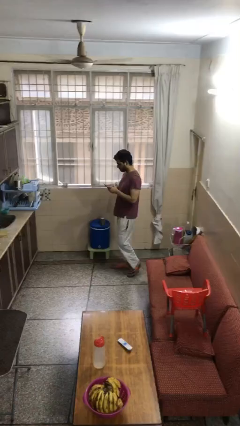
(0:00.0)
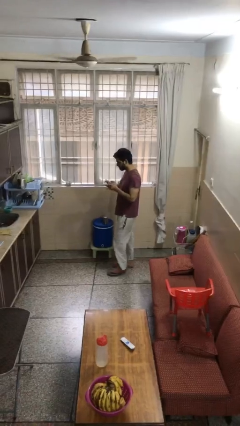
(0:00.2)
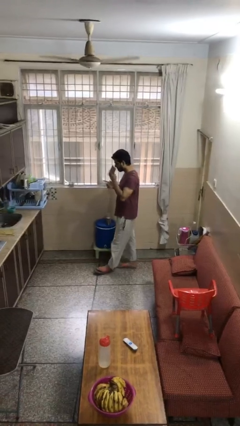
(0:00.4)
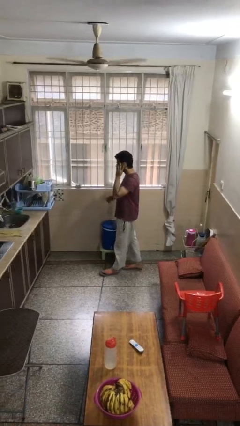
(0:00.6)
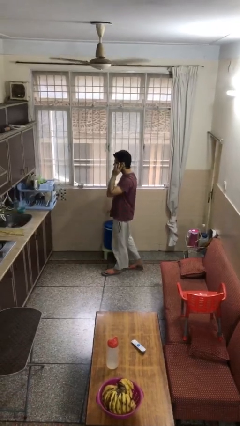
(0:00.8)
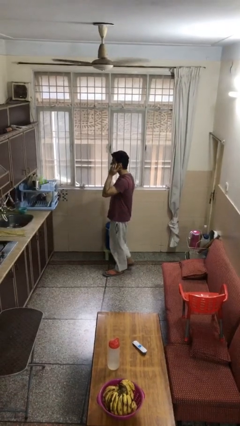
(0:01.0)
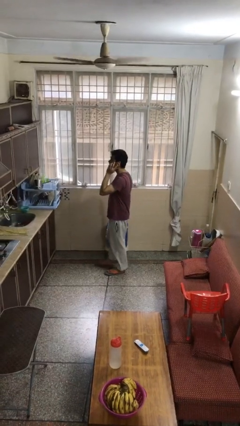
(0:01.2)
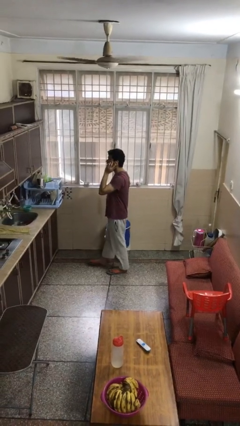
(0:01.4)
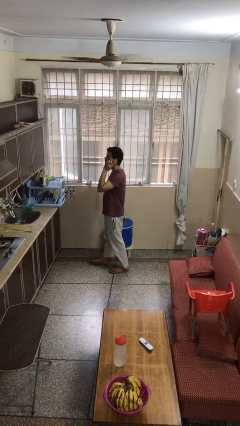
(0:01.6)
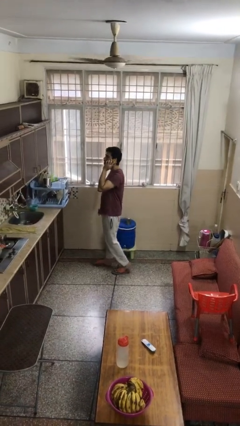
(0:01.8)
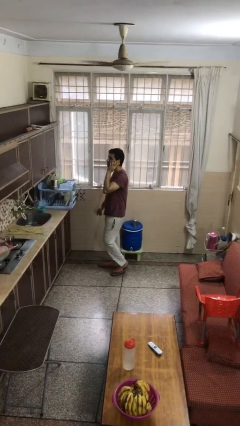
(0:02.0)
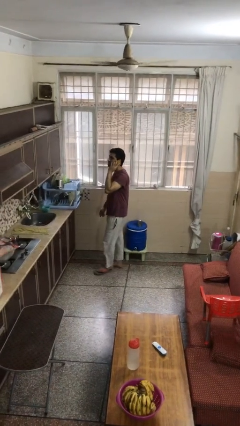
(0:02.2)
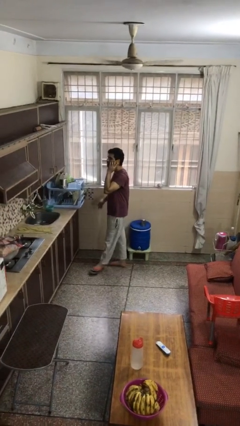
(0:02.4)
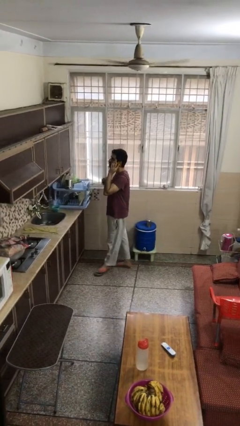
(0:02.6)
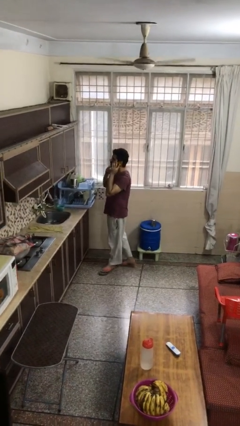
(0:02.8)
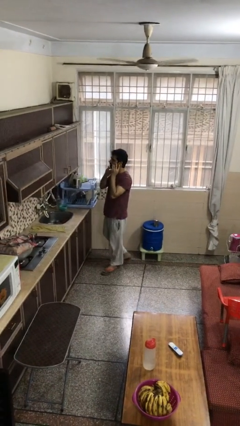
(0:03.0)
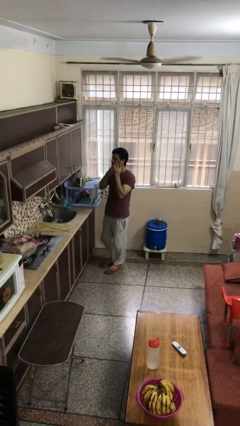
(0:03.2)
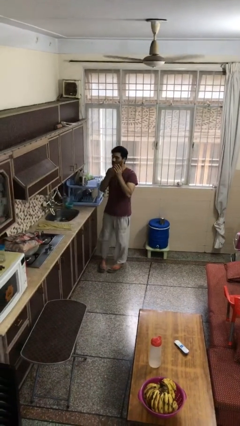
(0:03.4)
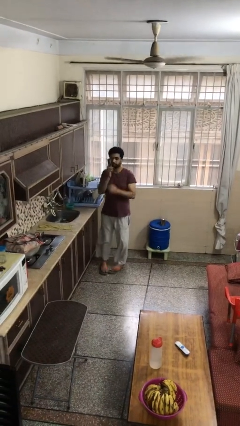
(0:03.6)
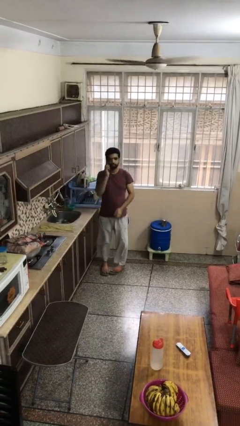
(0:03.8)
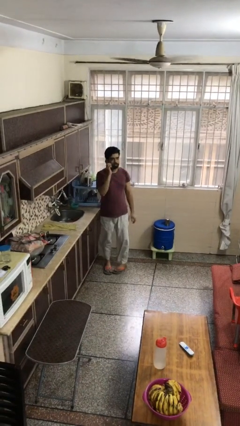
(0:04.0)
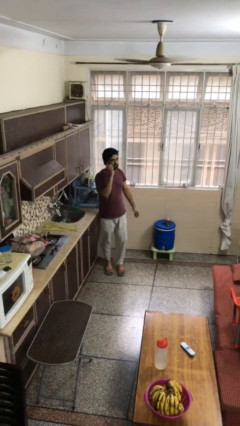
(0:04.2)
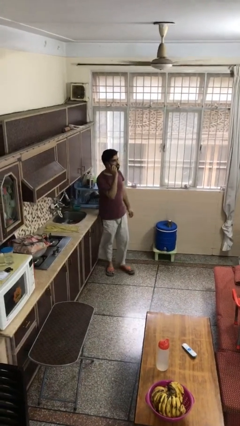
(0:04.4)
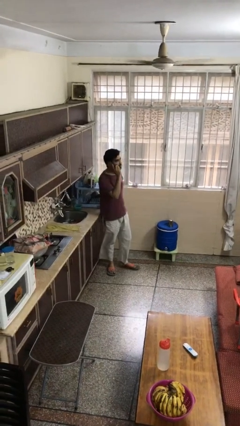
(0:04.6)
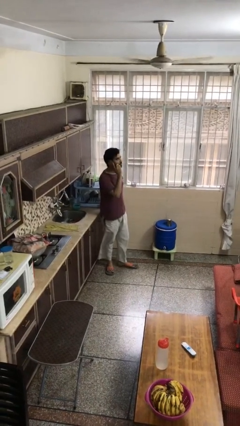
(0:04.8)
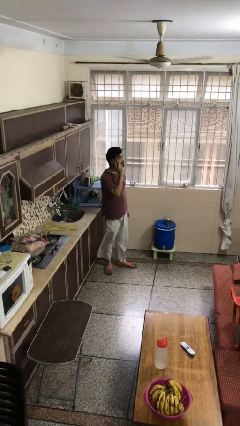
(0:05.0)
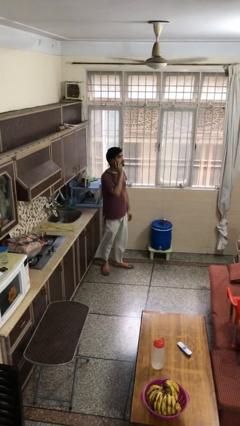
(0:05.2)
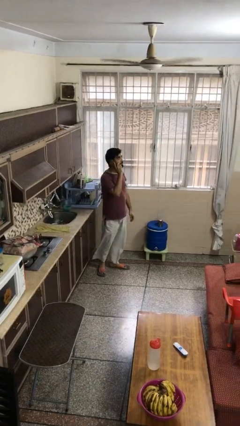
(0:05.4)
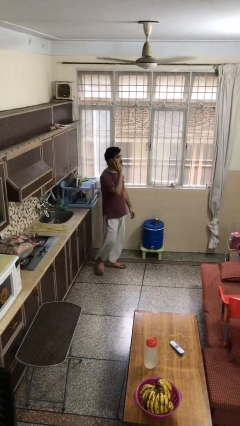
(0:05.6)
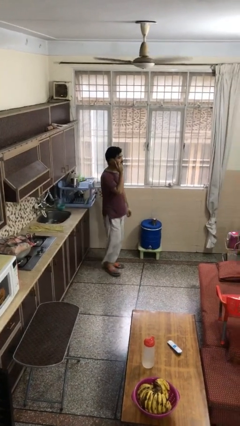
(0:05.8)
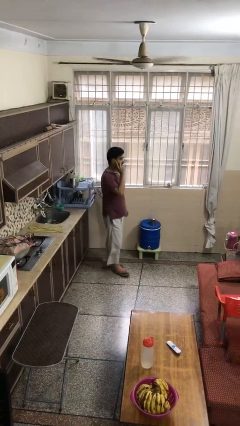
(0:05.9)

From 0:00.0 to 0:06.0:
person talks on phone

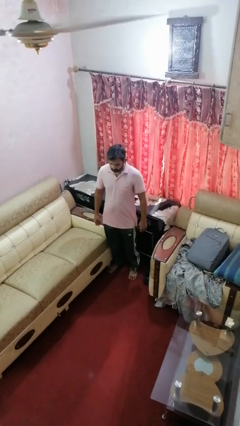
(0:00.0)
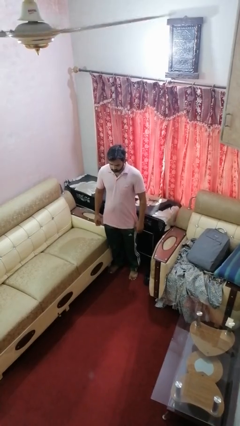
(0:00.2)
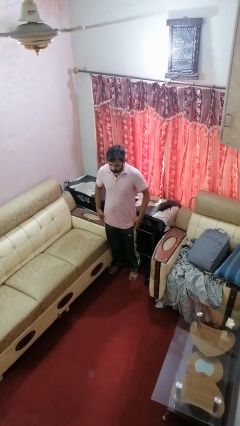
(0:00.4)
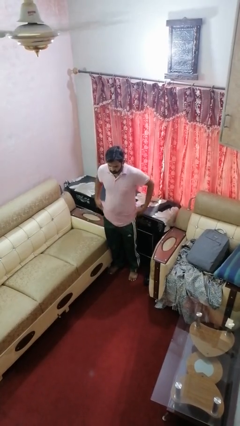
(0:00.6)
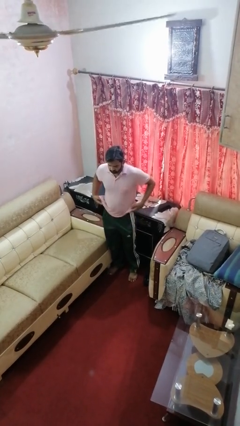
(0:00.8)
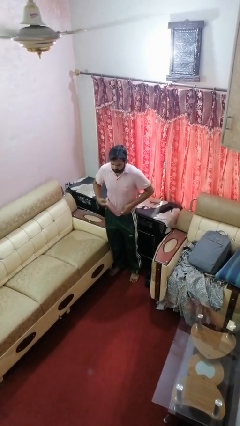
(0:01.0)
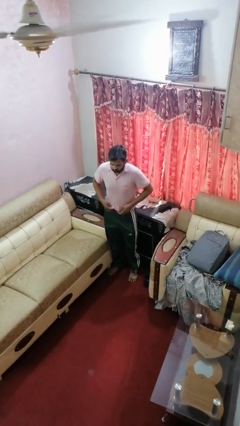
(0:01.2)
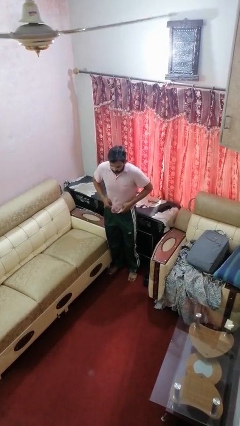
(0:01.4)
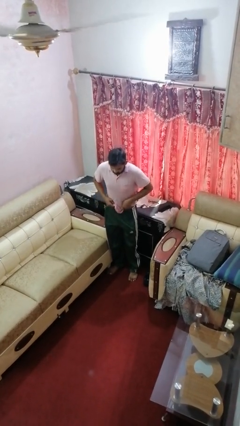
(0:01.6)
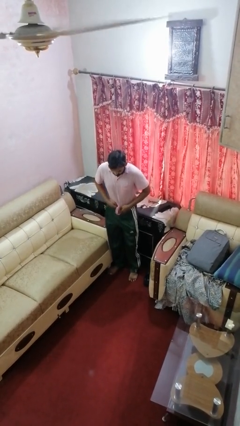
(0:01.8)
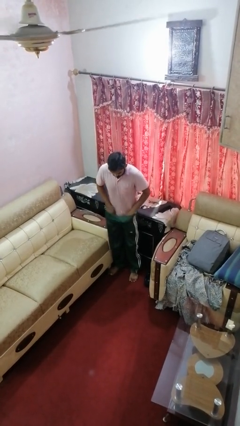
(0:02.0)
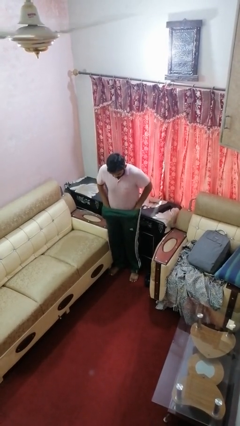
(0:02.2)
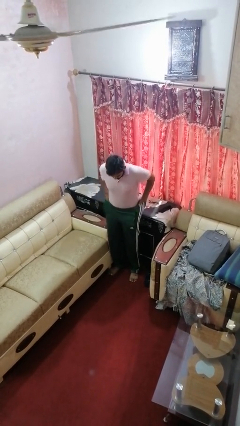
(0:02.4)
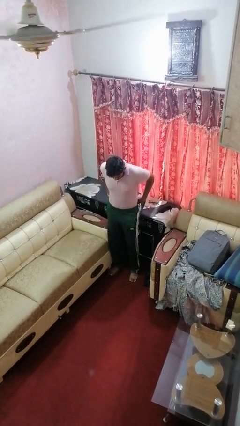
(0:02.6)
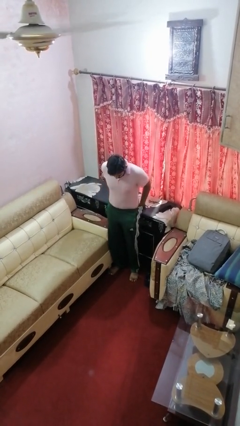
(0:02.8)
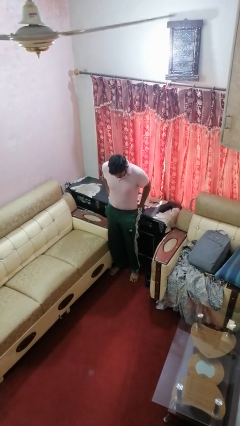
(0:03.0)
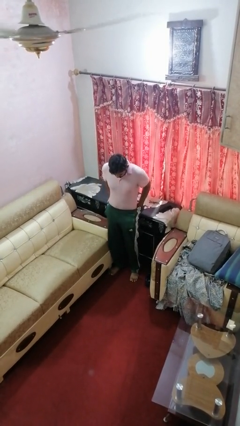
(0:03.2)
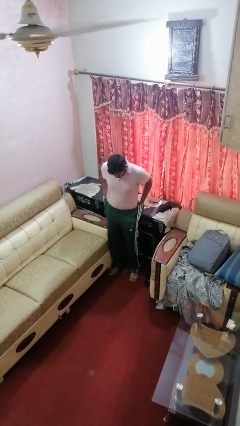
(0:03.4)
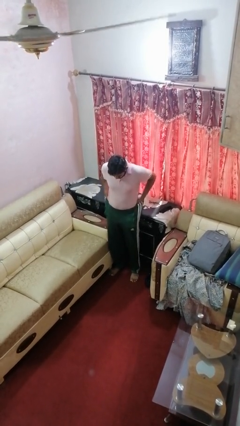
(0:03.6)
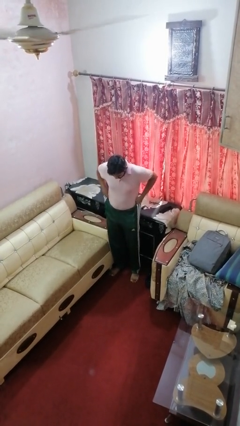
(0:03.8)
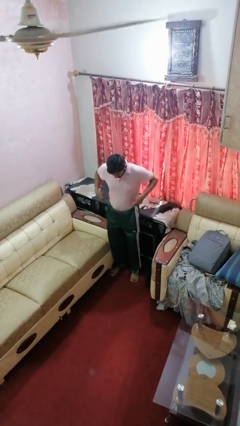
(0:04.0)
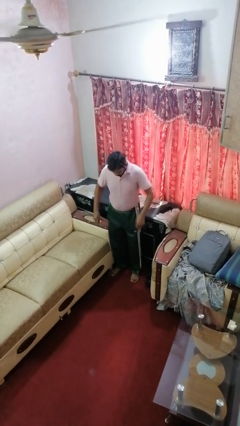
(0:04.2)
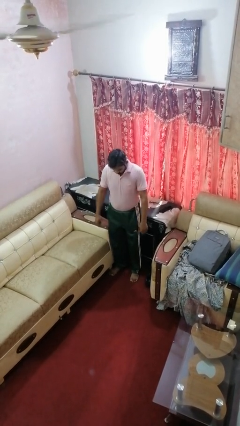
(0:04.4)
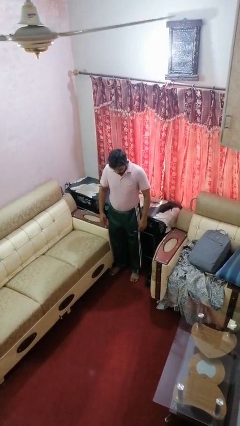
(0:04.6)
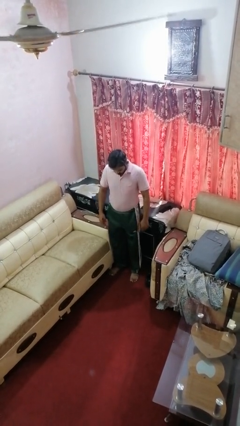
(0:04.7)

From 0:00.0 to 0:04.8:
person tucks in shirt

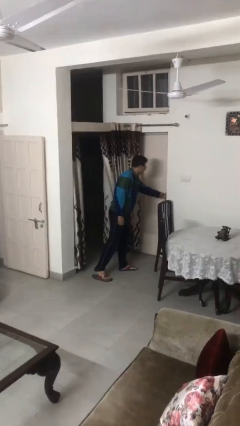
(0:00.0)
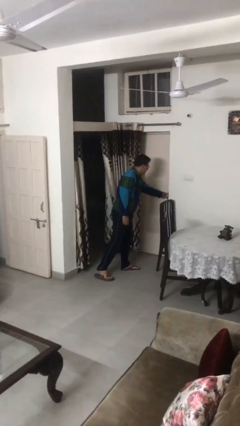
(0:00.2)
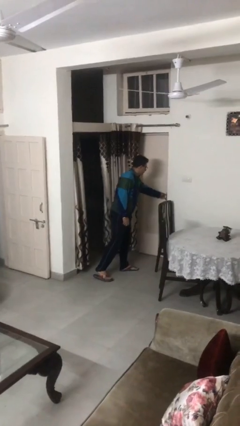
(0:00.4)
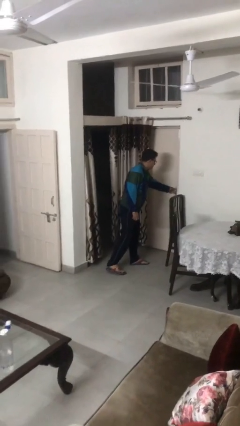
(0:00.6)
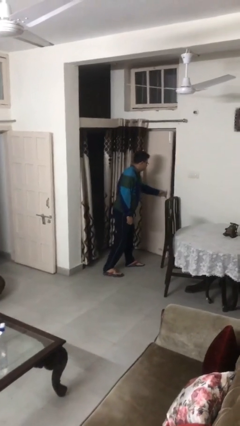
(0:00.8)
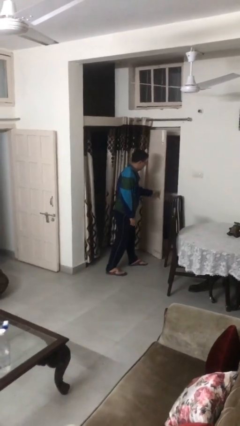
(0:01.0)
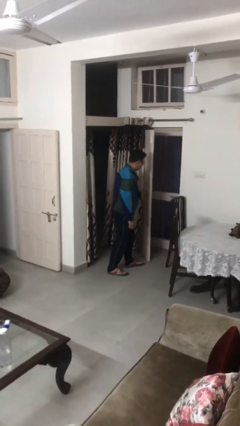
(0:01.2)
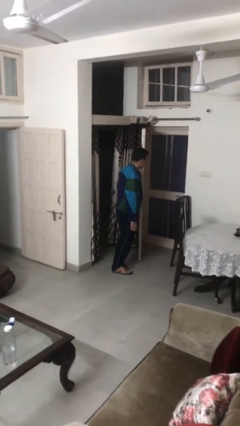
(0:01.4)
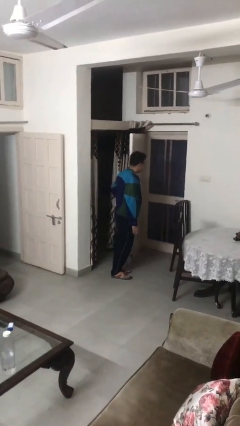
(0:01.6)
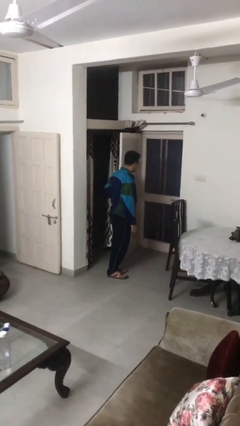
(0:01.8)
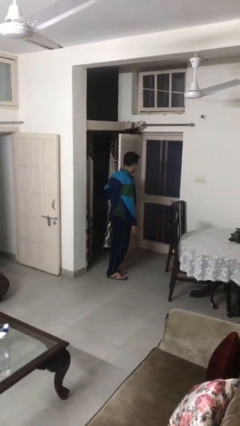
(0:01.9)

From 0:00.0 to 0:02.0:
person opens facility door

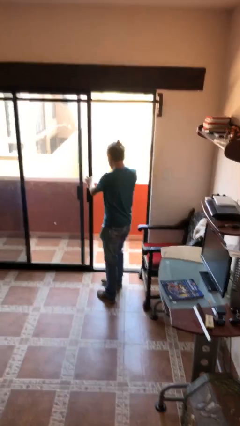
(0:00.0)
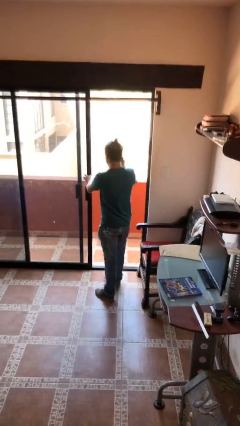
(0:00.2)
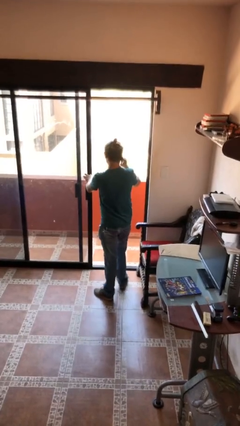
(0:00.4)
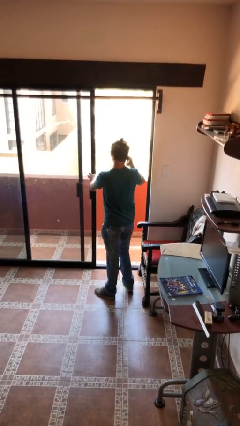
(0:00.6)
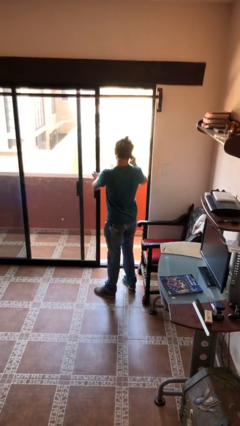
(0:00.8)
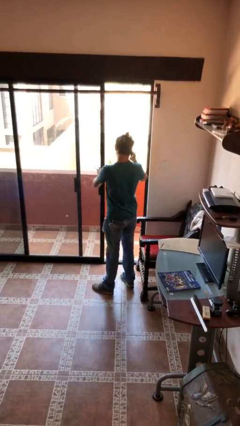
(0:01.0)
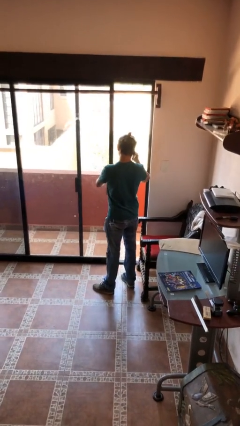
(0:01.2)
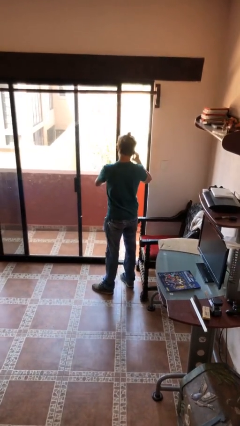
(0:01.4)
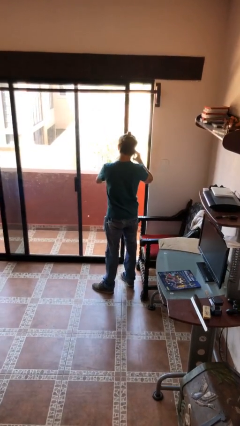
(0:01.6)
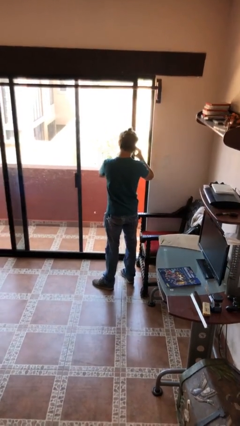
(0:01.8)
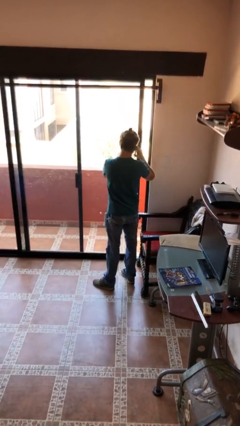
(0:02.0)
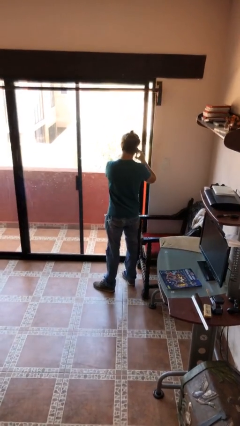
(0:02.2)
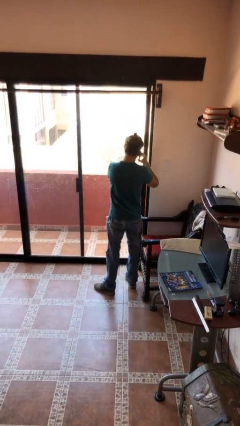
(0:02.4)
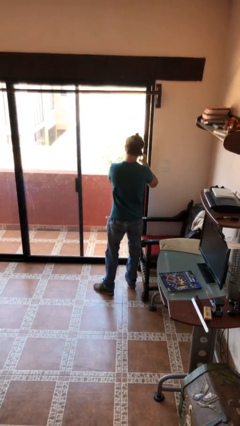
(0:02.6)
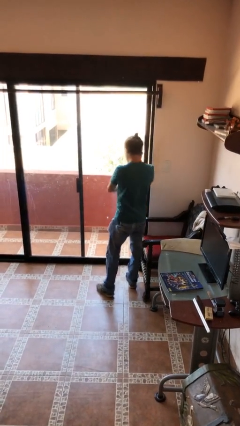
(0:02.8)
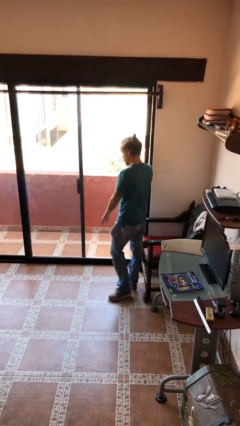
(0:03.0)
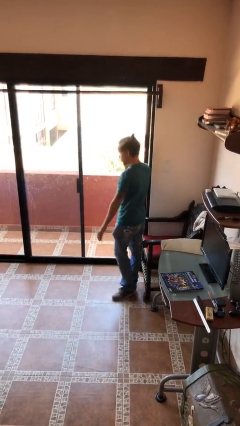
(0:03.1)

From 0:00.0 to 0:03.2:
person closes facility door

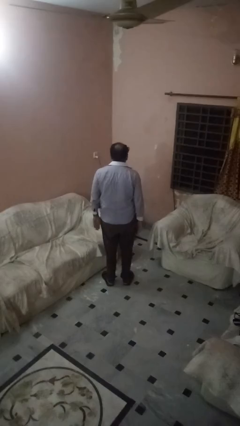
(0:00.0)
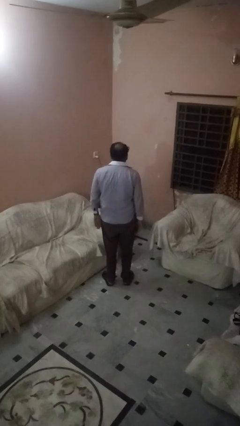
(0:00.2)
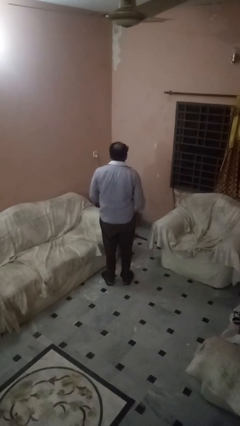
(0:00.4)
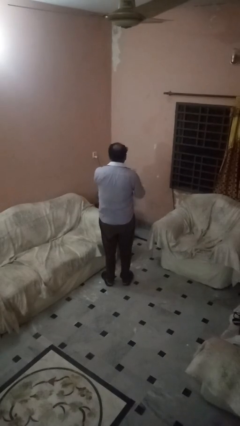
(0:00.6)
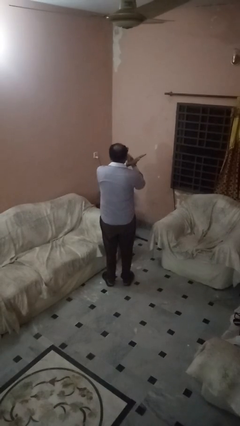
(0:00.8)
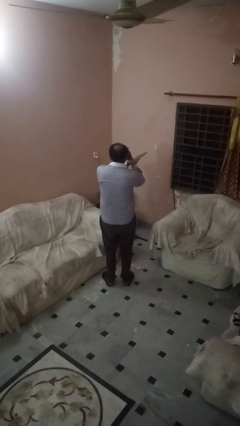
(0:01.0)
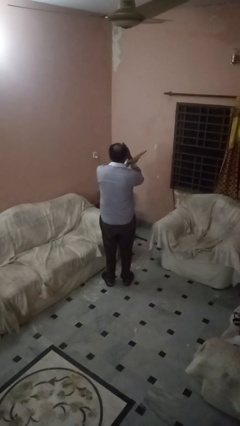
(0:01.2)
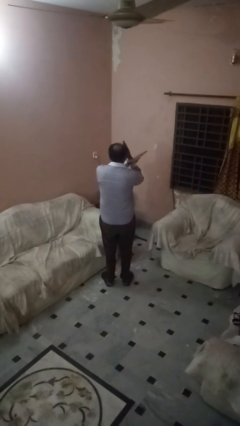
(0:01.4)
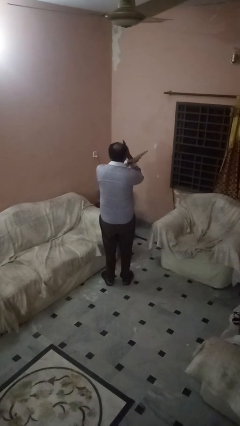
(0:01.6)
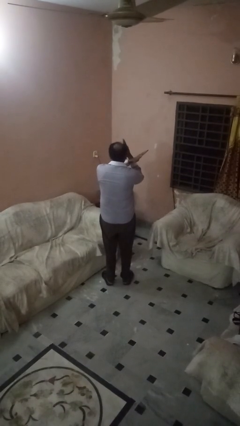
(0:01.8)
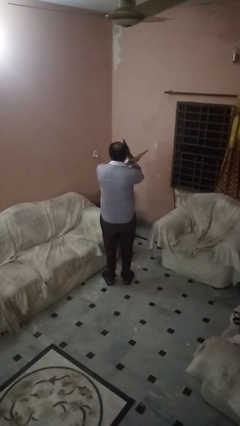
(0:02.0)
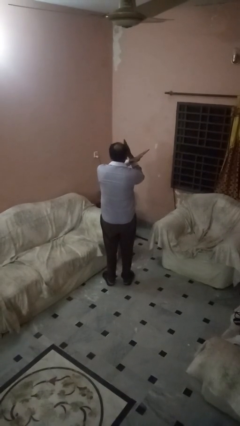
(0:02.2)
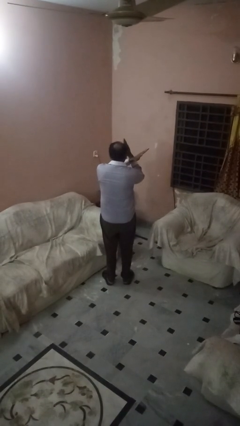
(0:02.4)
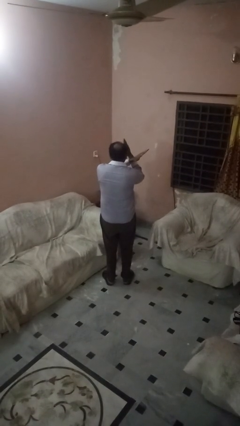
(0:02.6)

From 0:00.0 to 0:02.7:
person gestures arms x
